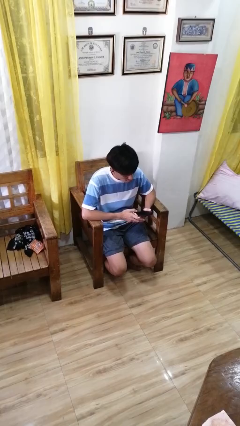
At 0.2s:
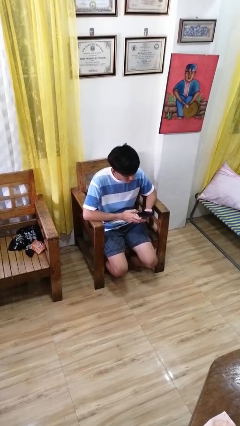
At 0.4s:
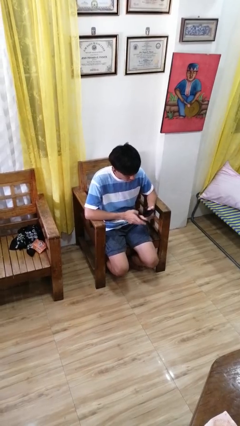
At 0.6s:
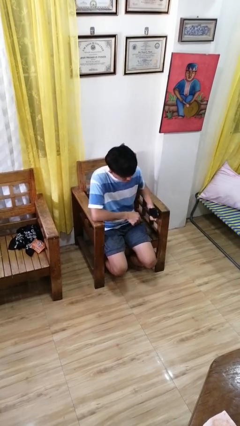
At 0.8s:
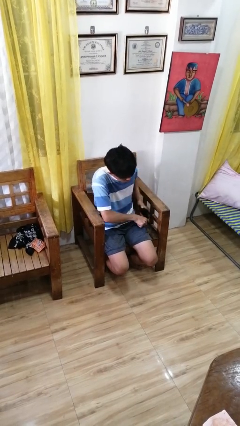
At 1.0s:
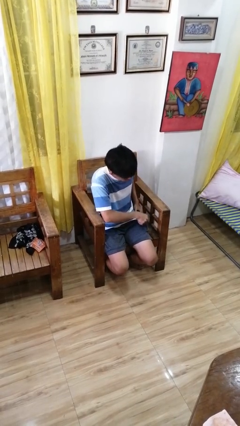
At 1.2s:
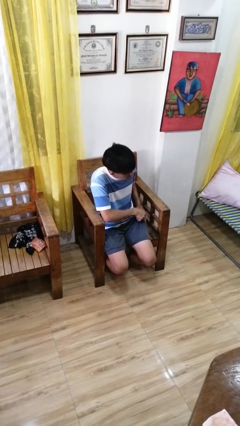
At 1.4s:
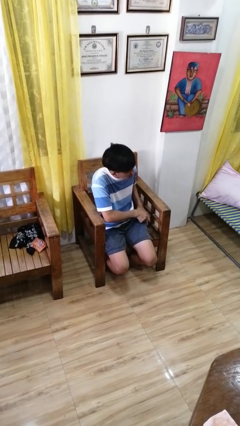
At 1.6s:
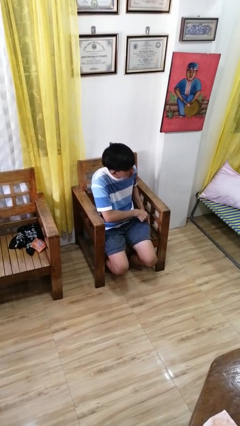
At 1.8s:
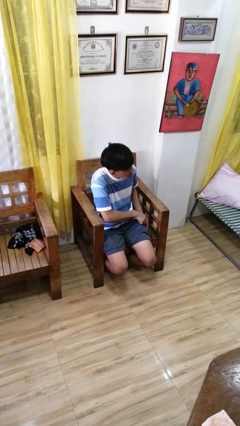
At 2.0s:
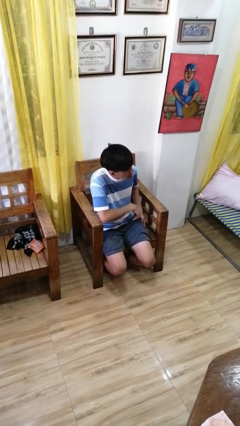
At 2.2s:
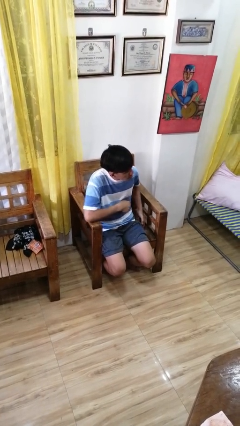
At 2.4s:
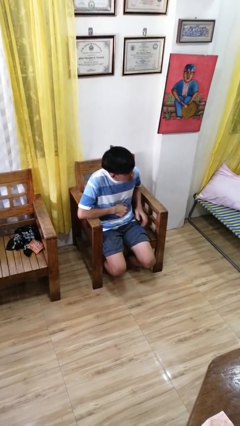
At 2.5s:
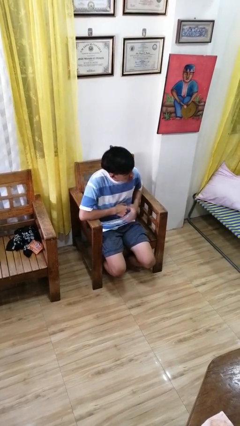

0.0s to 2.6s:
person puts phone into pocket

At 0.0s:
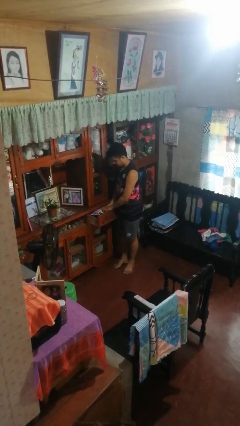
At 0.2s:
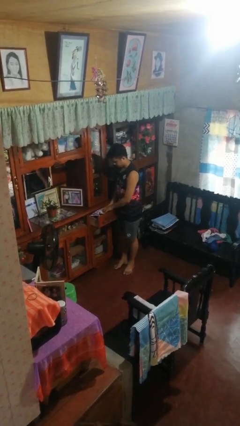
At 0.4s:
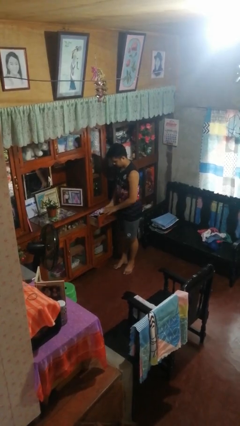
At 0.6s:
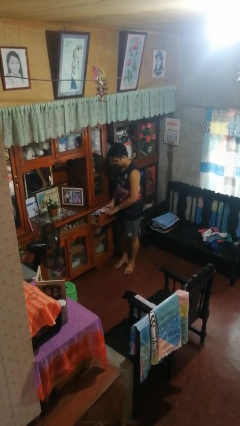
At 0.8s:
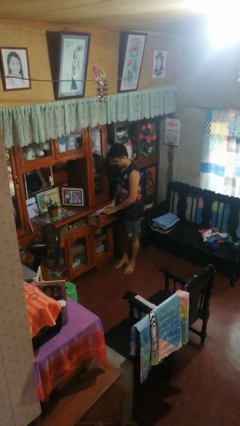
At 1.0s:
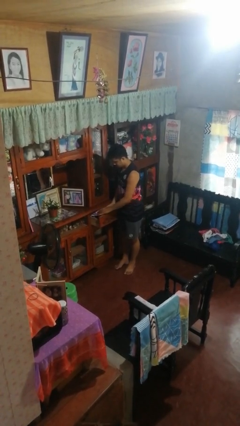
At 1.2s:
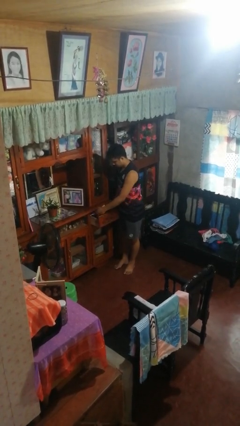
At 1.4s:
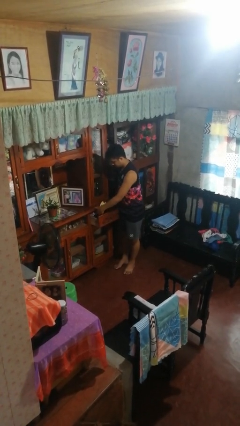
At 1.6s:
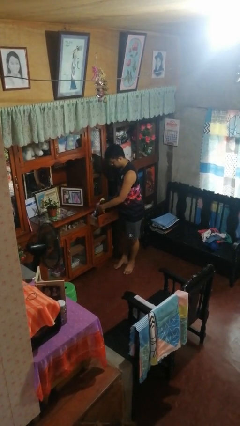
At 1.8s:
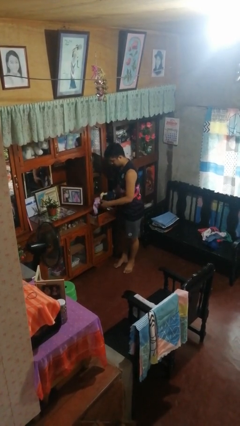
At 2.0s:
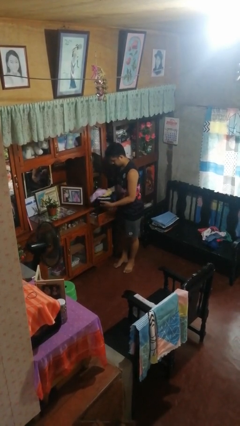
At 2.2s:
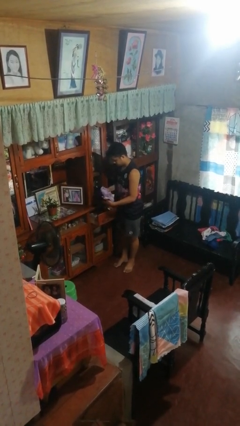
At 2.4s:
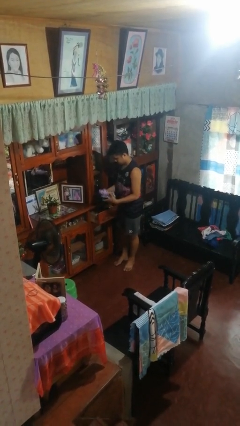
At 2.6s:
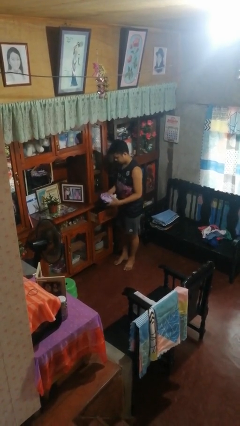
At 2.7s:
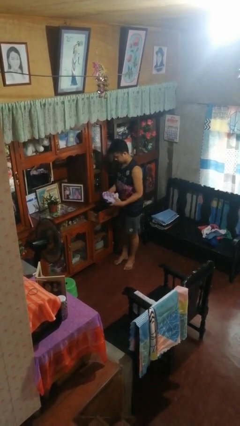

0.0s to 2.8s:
person takes clothes from dresser

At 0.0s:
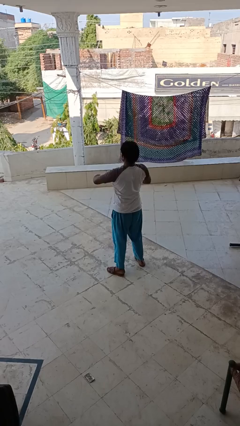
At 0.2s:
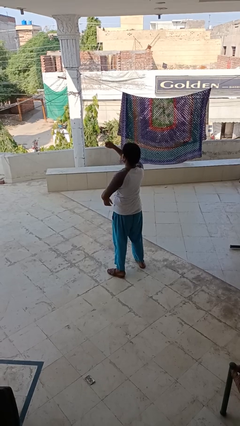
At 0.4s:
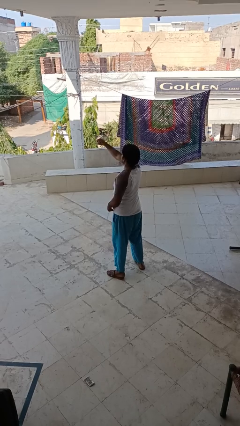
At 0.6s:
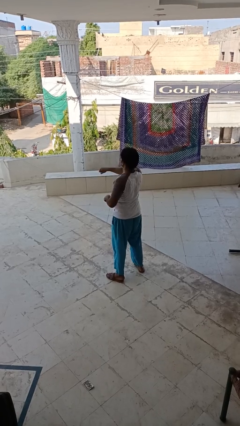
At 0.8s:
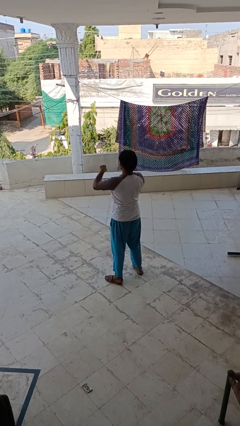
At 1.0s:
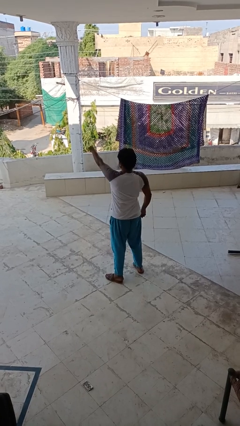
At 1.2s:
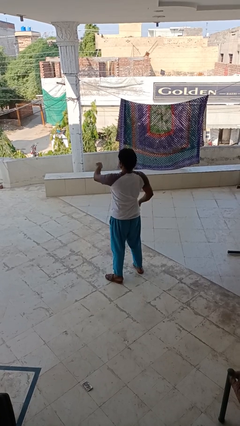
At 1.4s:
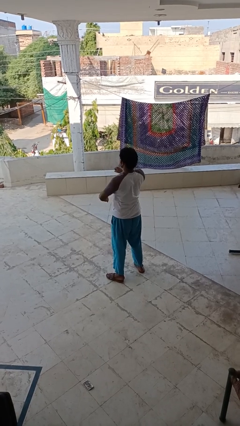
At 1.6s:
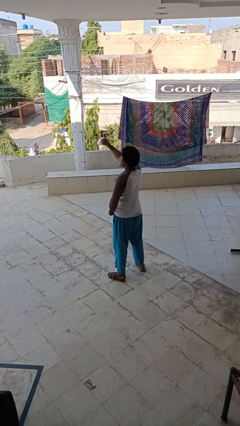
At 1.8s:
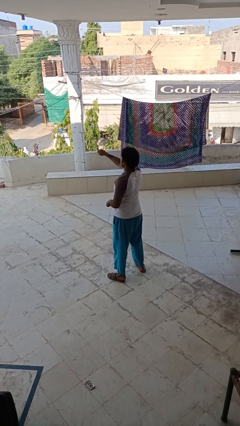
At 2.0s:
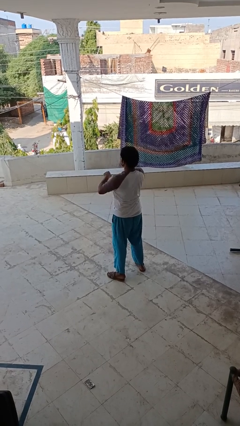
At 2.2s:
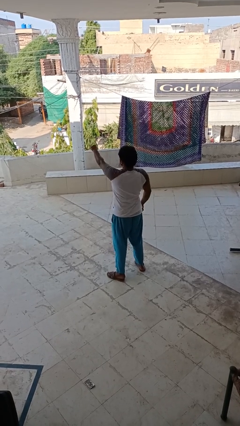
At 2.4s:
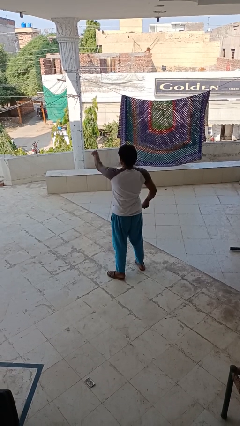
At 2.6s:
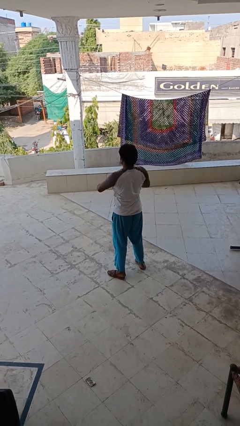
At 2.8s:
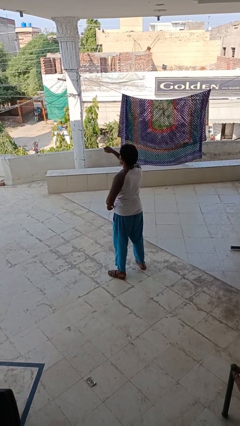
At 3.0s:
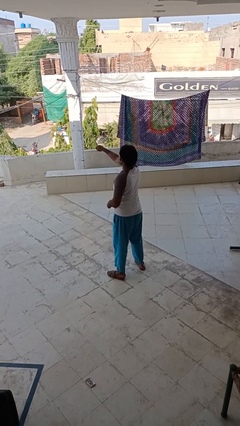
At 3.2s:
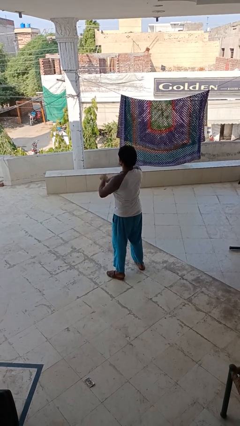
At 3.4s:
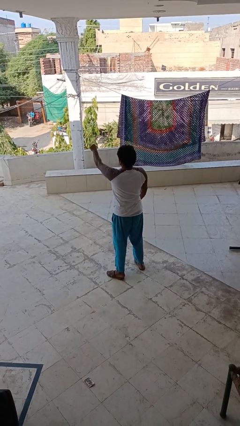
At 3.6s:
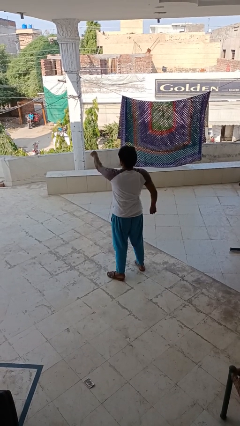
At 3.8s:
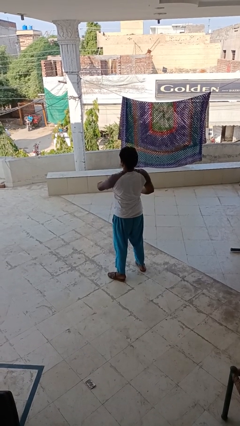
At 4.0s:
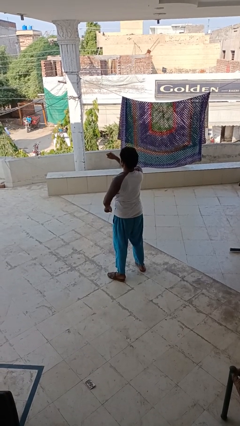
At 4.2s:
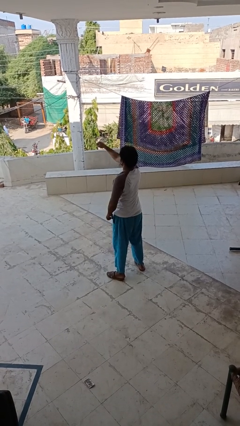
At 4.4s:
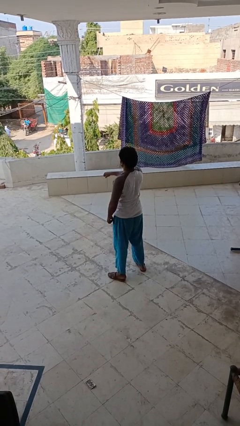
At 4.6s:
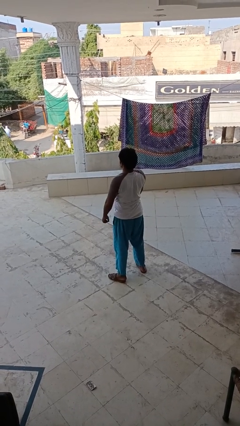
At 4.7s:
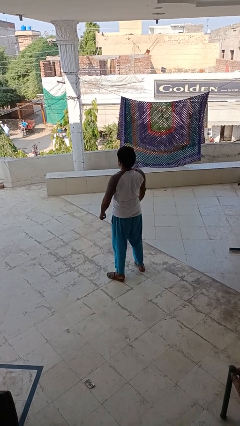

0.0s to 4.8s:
person punches

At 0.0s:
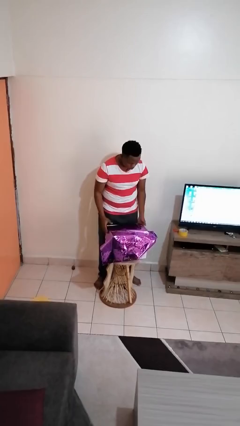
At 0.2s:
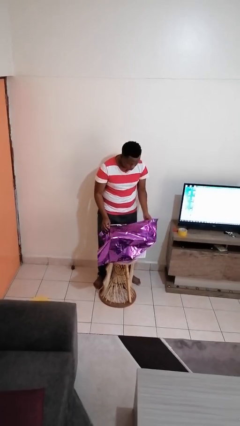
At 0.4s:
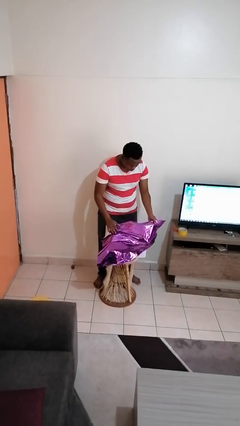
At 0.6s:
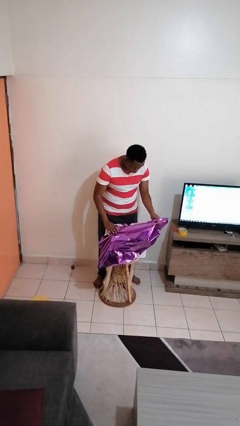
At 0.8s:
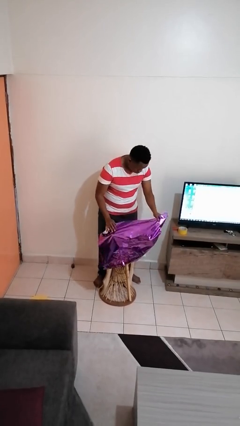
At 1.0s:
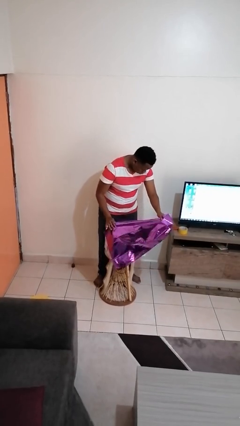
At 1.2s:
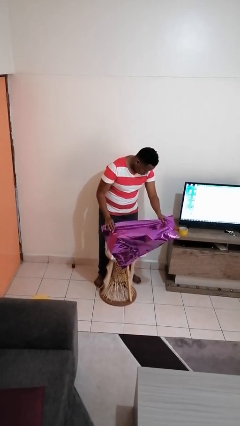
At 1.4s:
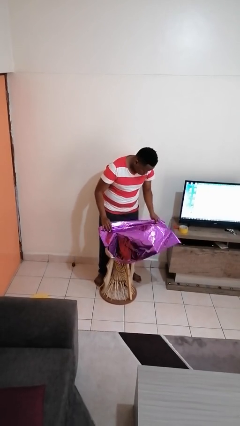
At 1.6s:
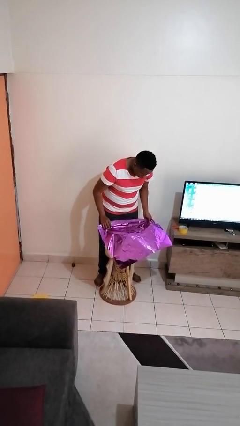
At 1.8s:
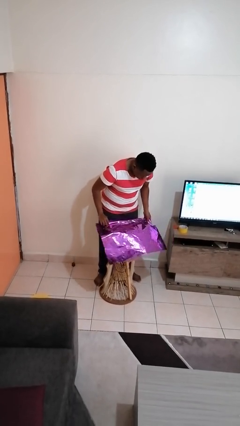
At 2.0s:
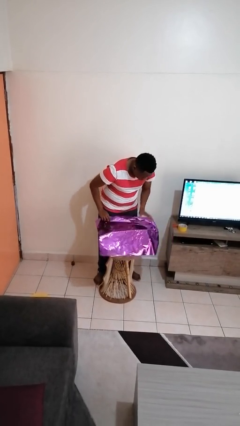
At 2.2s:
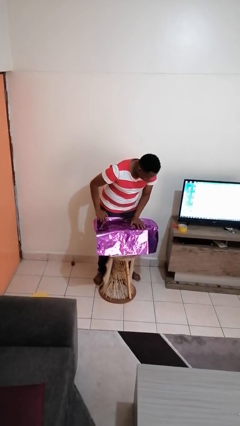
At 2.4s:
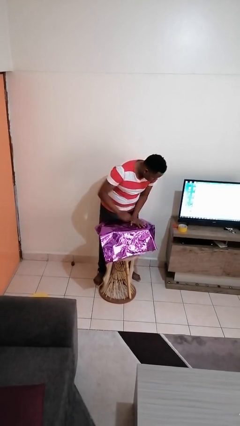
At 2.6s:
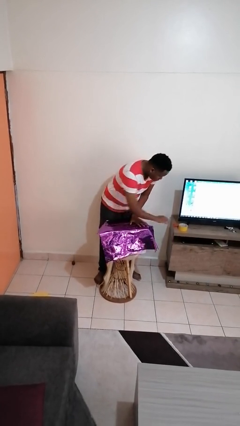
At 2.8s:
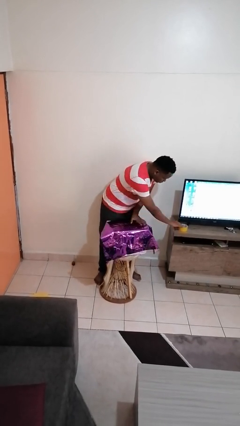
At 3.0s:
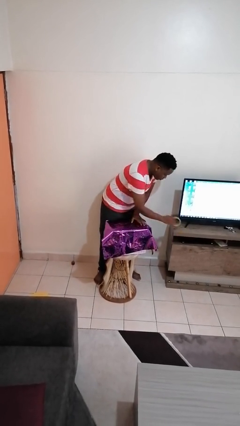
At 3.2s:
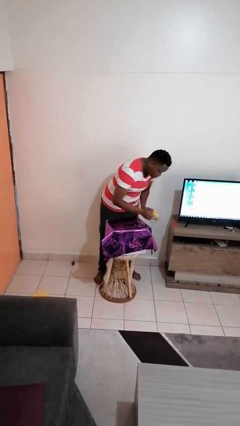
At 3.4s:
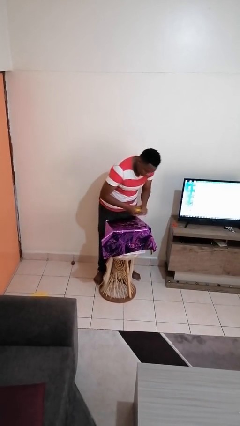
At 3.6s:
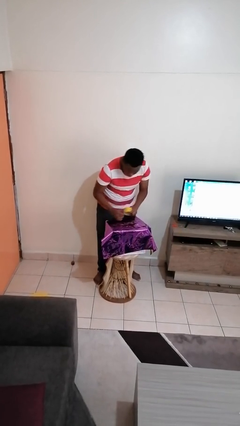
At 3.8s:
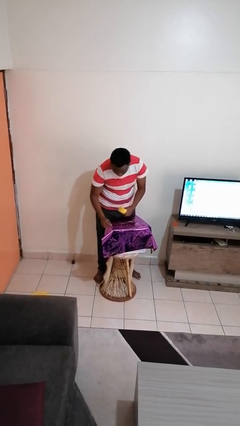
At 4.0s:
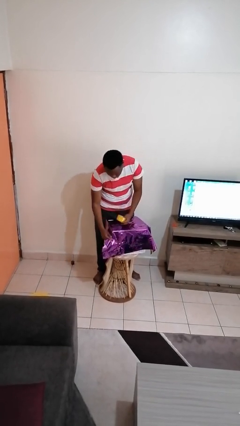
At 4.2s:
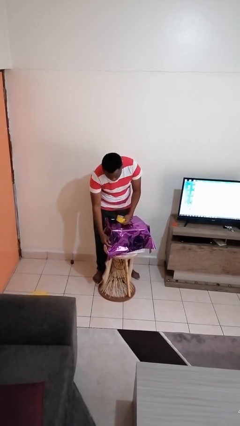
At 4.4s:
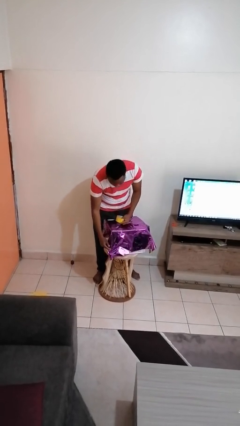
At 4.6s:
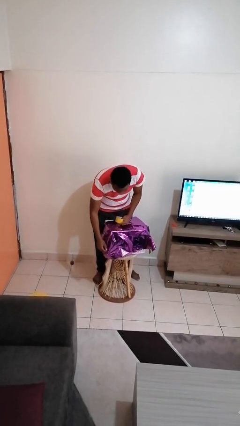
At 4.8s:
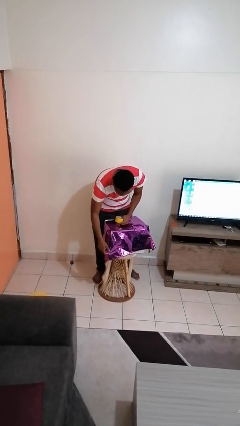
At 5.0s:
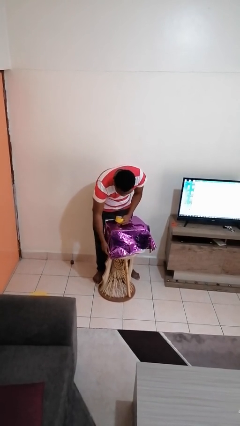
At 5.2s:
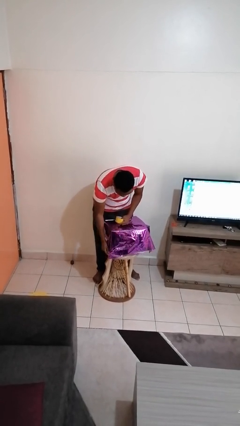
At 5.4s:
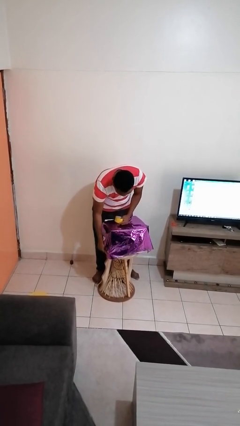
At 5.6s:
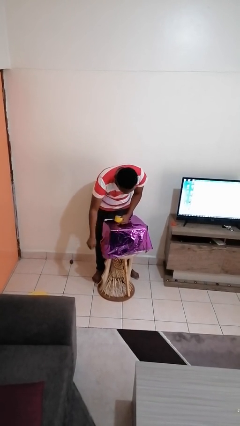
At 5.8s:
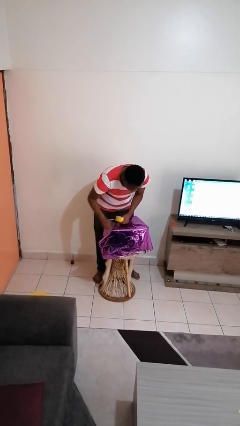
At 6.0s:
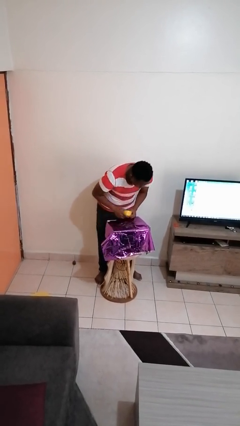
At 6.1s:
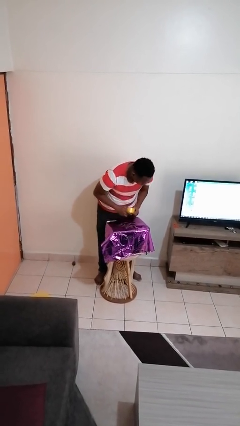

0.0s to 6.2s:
person wraps box

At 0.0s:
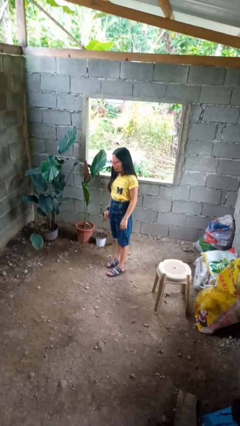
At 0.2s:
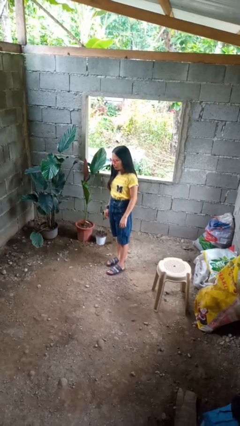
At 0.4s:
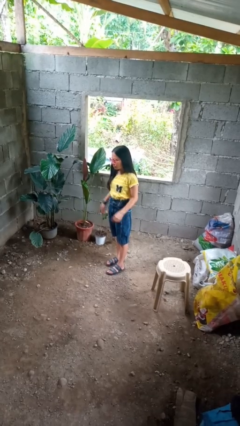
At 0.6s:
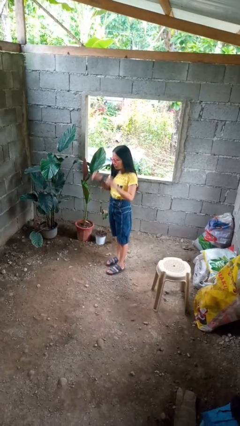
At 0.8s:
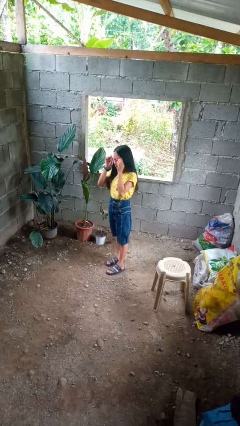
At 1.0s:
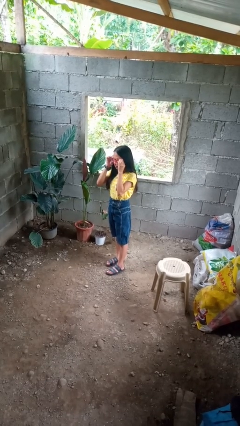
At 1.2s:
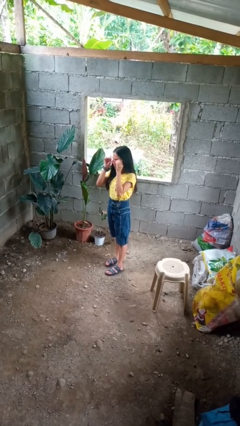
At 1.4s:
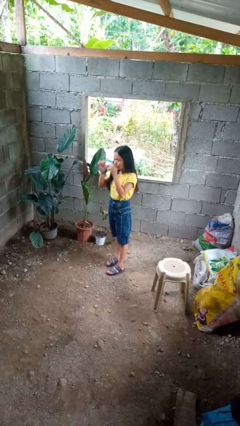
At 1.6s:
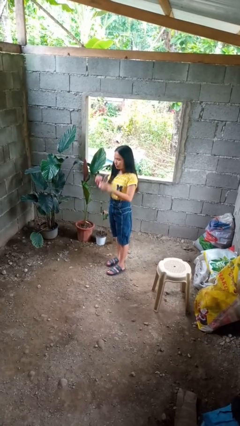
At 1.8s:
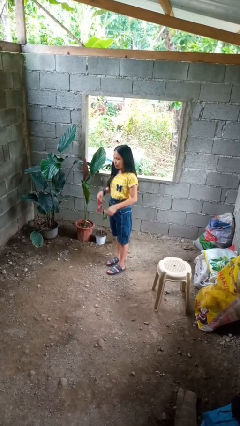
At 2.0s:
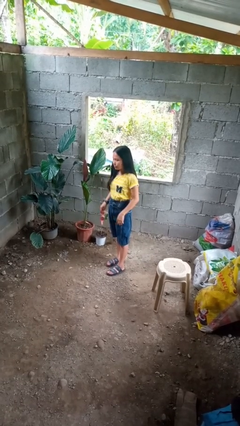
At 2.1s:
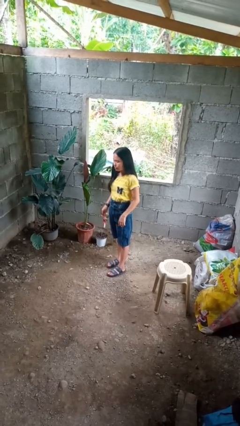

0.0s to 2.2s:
person takes off sunglasses
